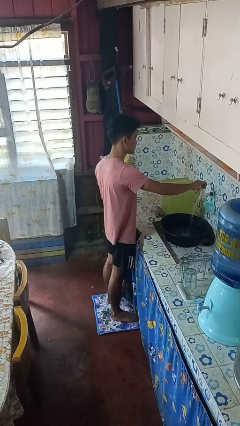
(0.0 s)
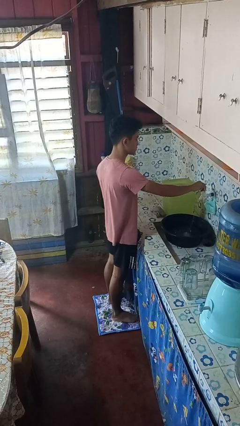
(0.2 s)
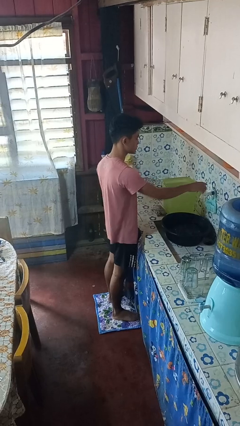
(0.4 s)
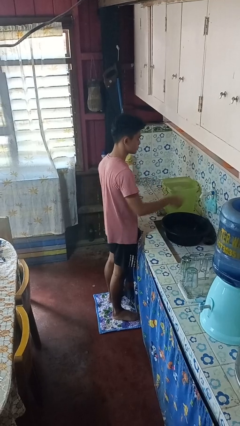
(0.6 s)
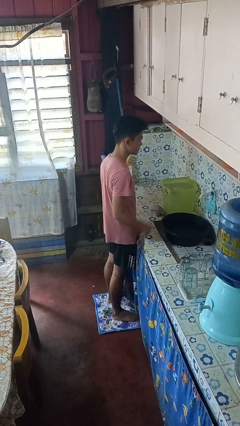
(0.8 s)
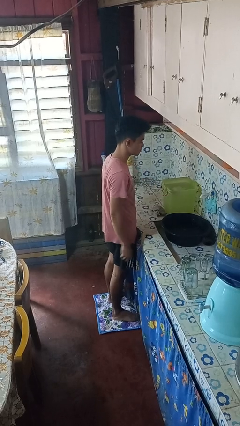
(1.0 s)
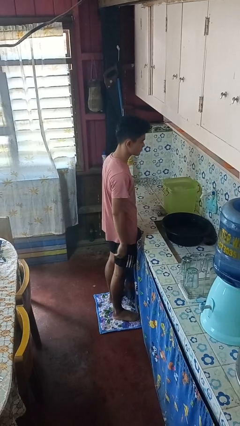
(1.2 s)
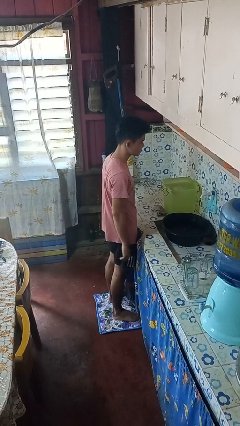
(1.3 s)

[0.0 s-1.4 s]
person turns off faucet

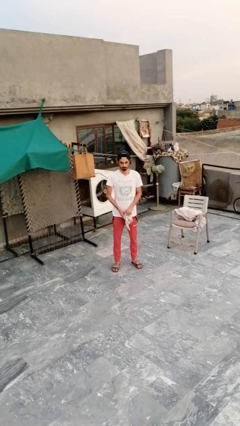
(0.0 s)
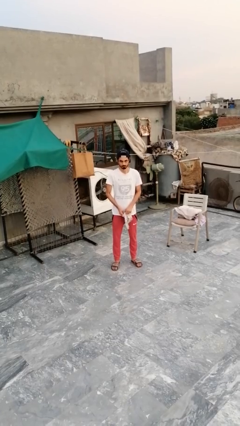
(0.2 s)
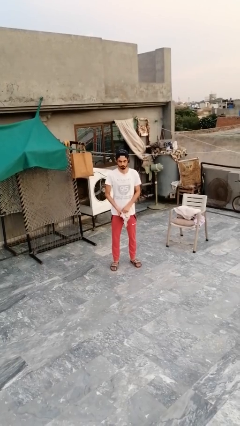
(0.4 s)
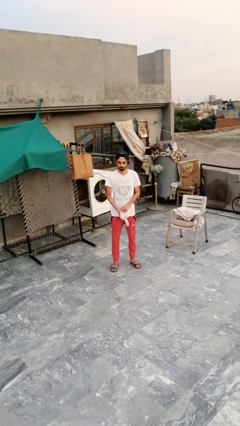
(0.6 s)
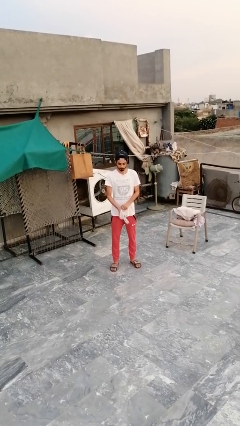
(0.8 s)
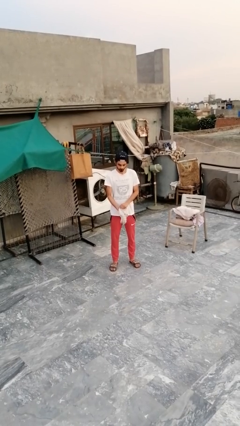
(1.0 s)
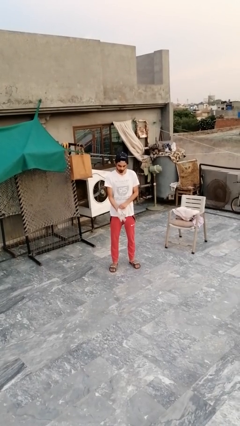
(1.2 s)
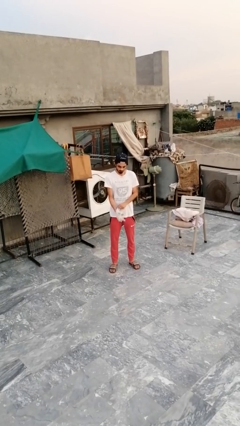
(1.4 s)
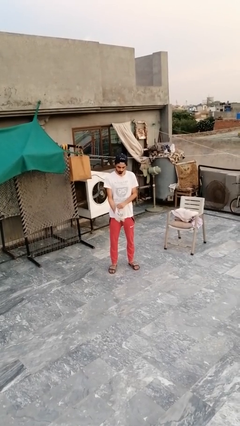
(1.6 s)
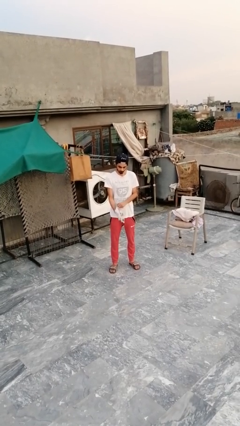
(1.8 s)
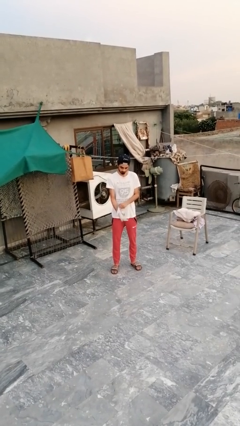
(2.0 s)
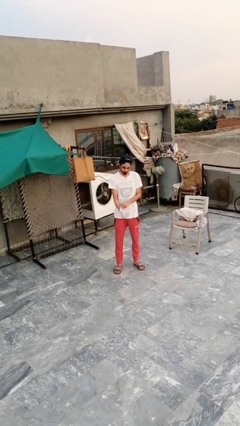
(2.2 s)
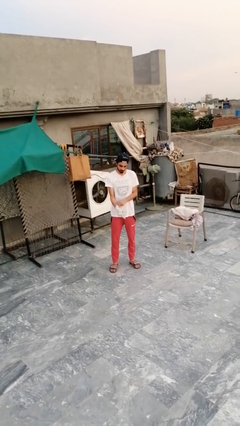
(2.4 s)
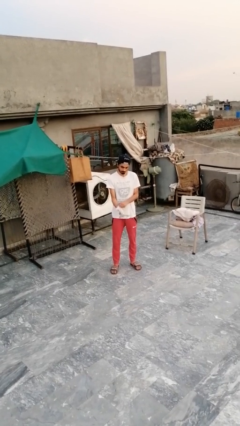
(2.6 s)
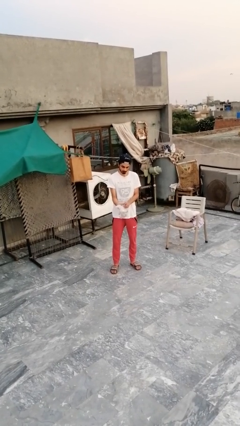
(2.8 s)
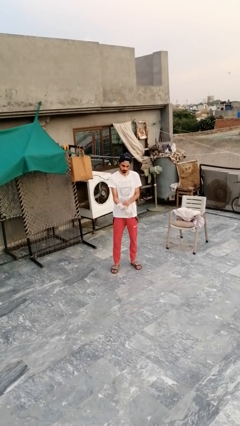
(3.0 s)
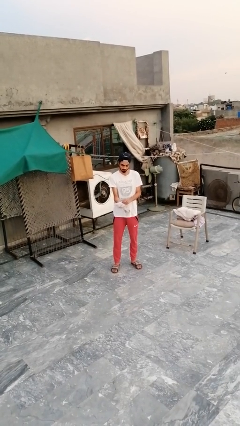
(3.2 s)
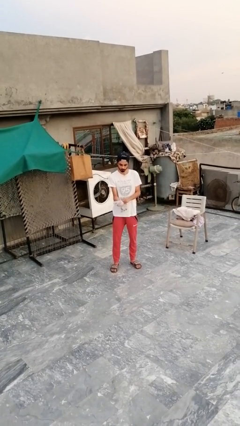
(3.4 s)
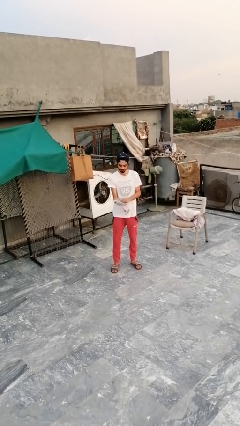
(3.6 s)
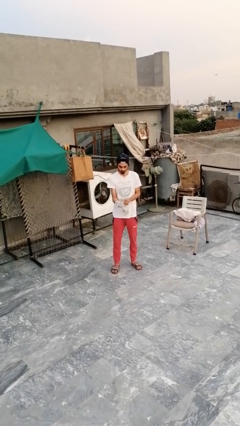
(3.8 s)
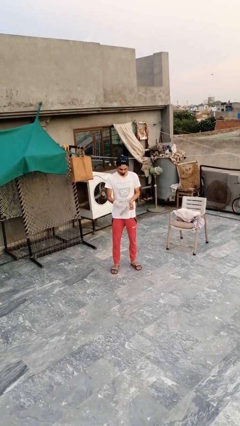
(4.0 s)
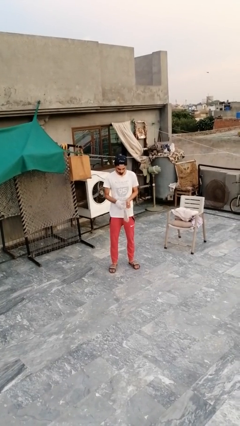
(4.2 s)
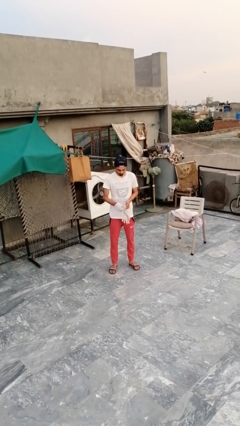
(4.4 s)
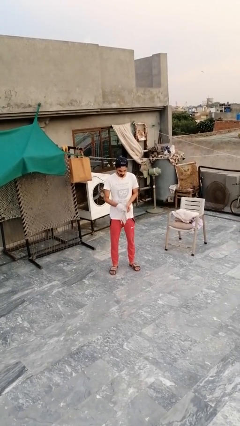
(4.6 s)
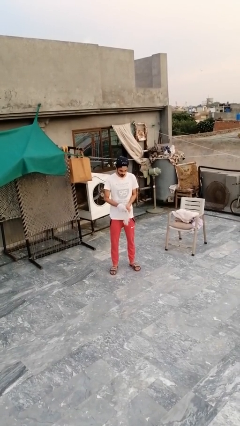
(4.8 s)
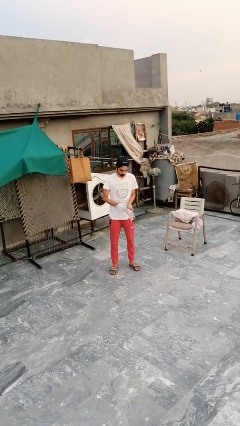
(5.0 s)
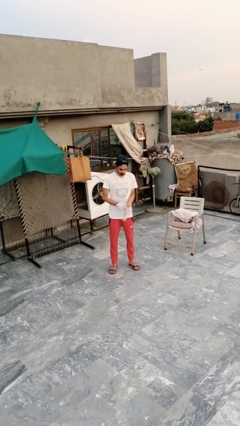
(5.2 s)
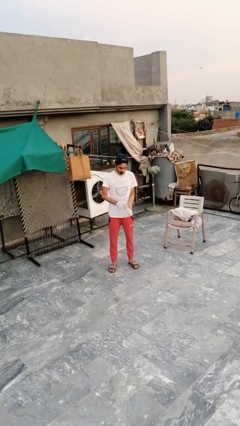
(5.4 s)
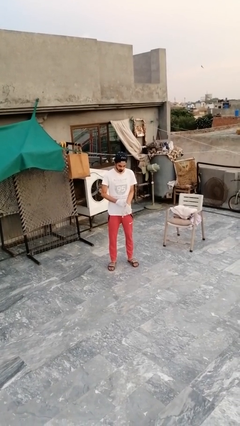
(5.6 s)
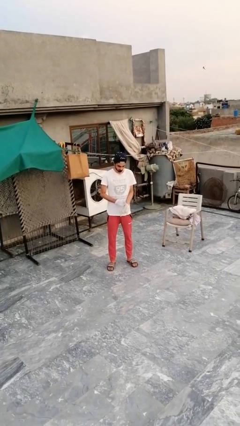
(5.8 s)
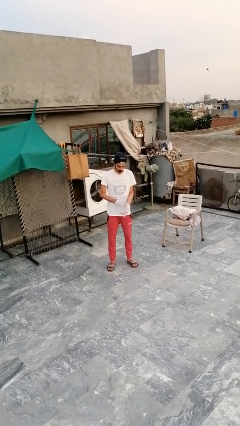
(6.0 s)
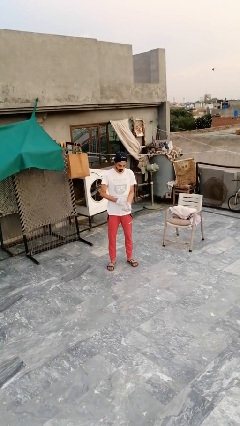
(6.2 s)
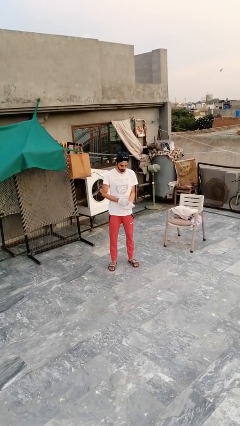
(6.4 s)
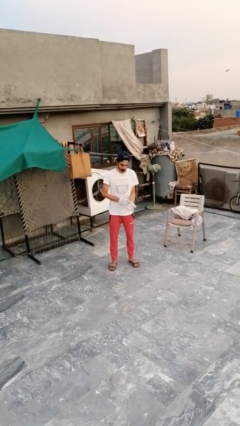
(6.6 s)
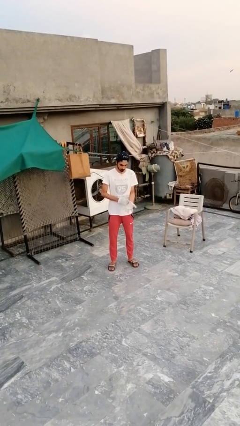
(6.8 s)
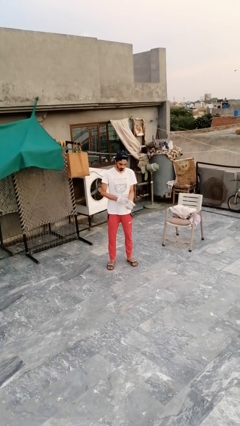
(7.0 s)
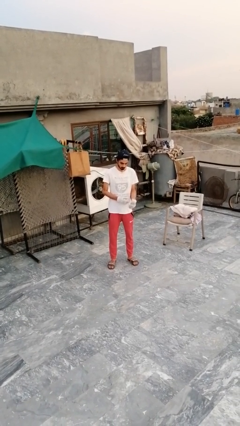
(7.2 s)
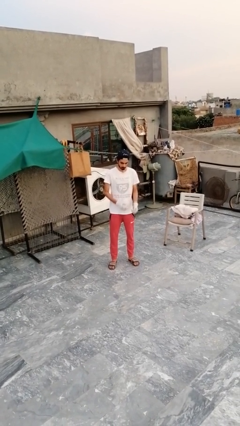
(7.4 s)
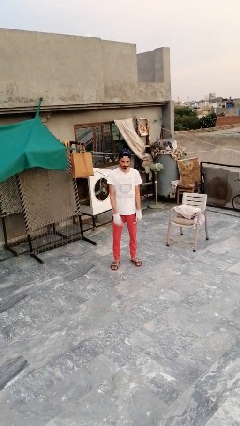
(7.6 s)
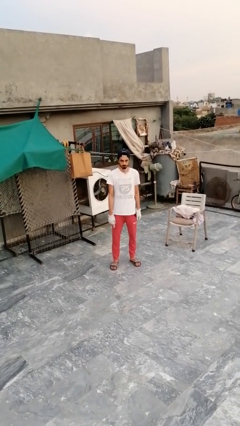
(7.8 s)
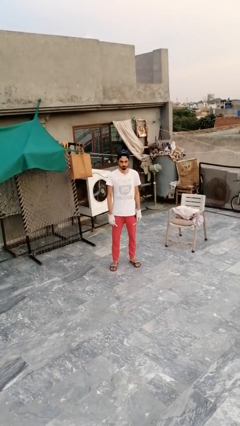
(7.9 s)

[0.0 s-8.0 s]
person puts on gloves

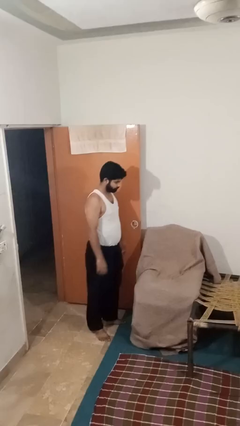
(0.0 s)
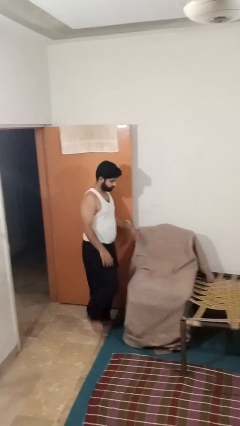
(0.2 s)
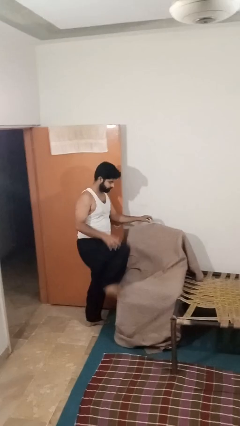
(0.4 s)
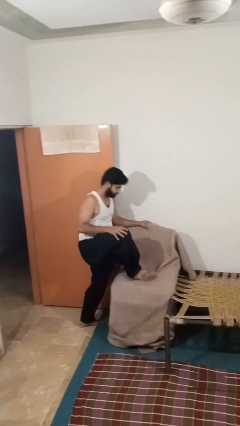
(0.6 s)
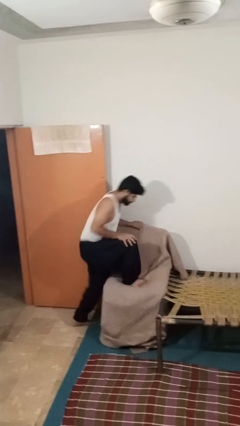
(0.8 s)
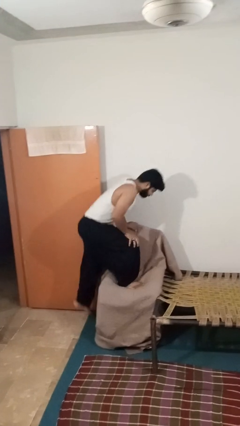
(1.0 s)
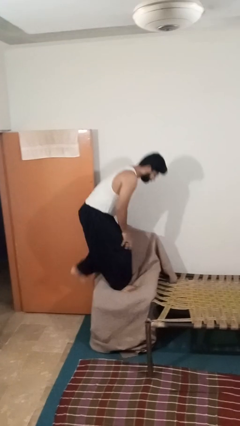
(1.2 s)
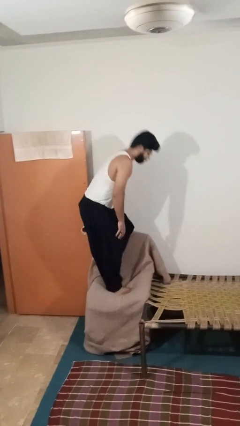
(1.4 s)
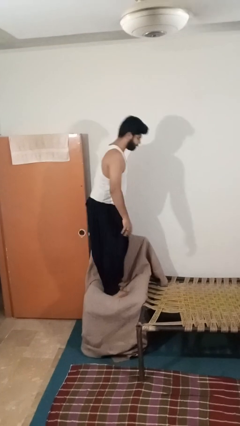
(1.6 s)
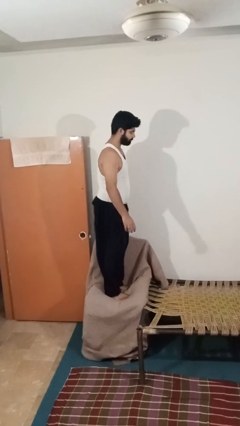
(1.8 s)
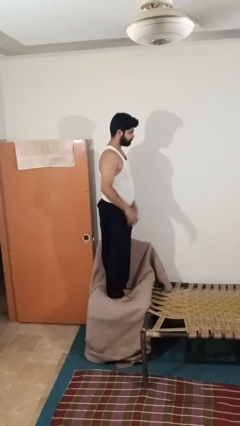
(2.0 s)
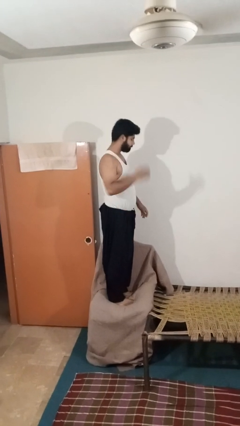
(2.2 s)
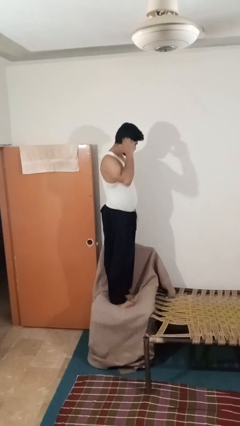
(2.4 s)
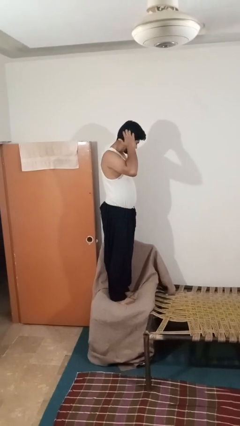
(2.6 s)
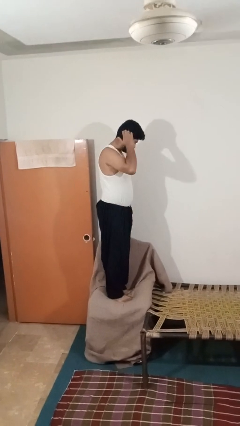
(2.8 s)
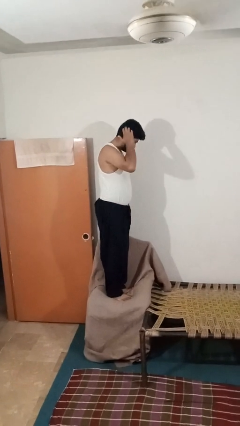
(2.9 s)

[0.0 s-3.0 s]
person climbs on couch

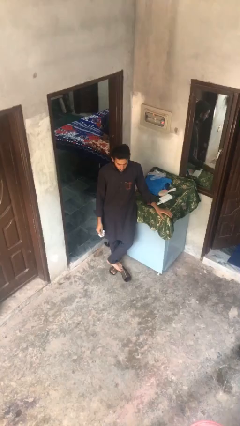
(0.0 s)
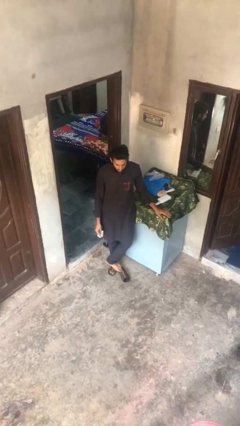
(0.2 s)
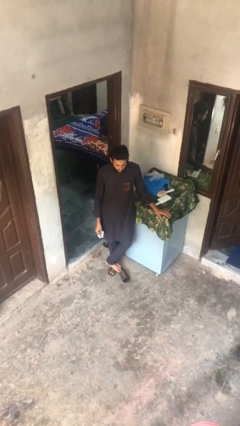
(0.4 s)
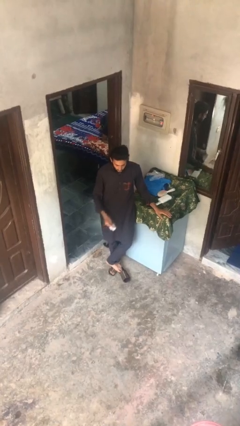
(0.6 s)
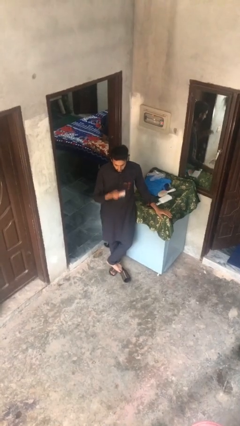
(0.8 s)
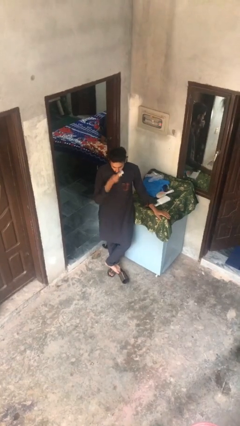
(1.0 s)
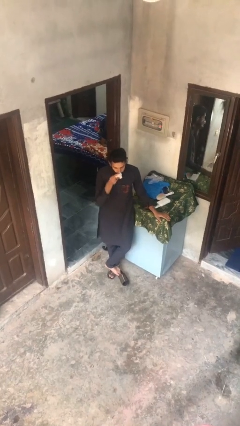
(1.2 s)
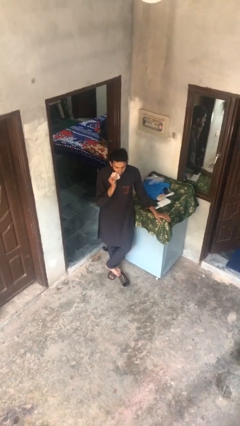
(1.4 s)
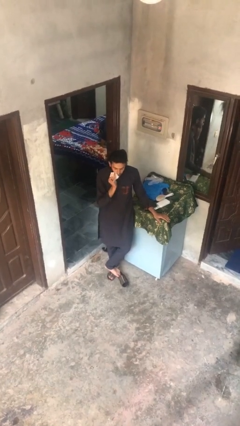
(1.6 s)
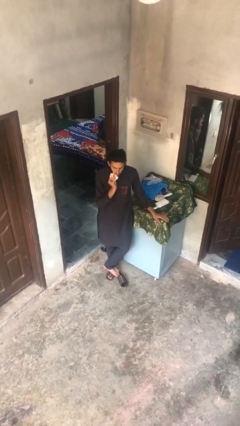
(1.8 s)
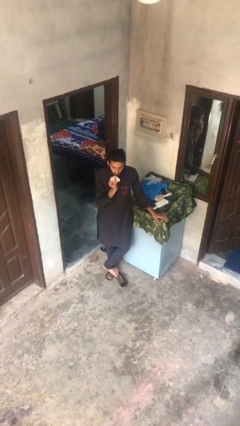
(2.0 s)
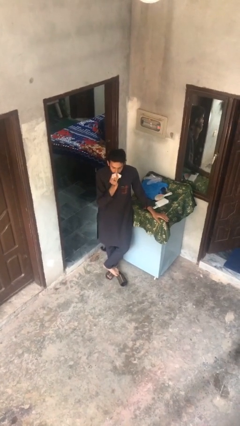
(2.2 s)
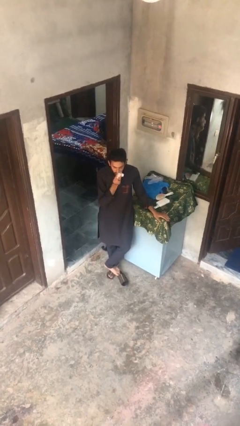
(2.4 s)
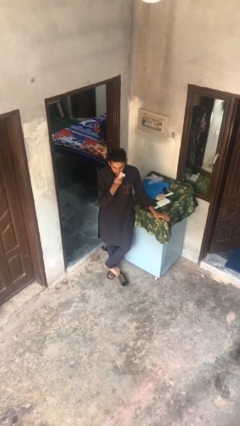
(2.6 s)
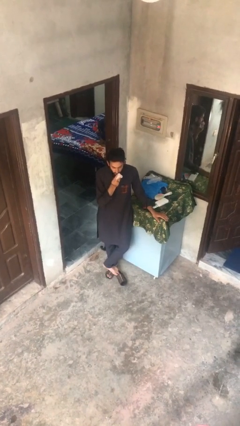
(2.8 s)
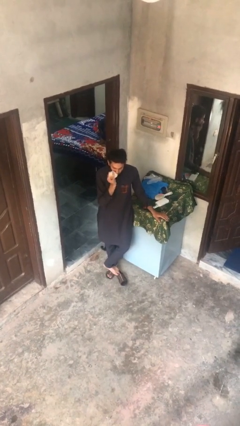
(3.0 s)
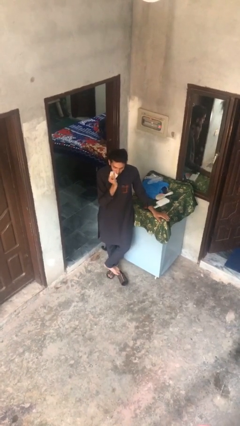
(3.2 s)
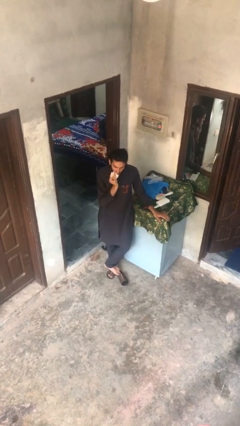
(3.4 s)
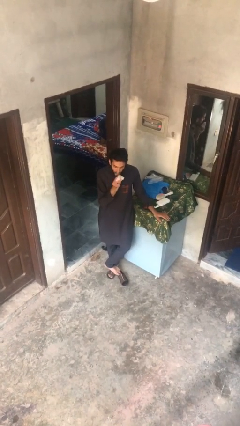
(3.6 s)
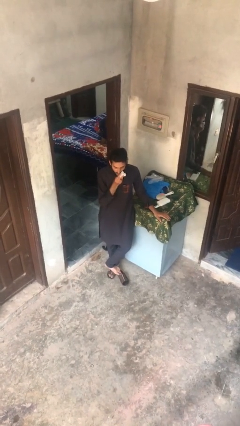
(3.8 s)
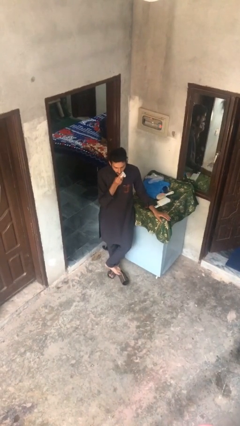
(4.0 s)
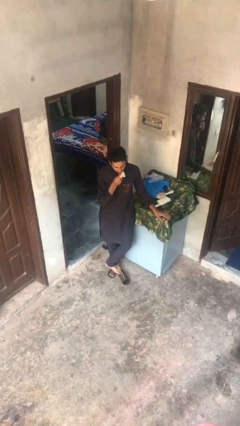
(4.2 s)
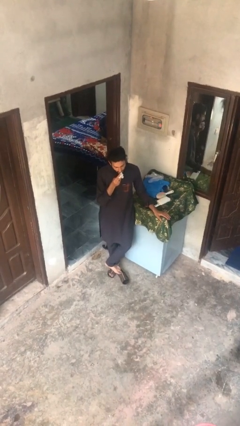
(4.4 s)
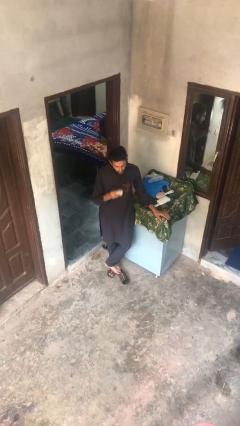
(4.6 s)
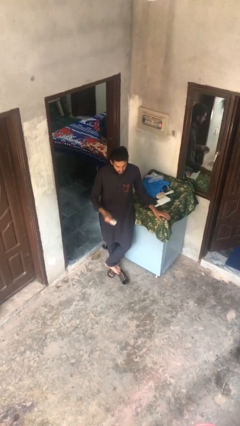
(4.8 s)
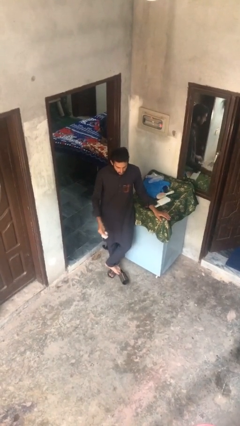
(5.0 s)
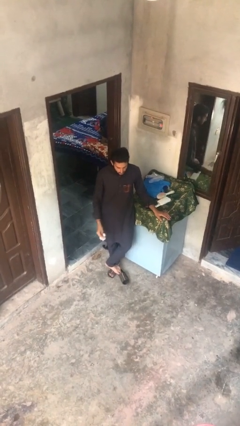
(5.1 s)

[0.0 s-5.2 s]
person wipes mouth with napkin

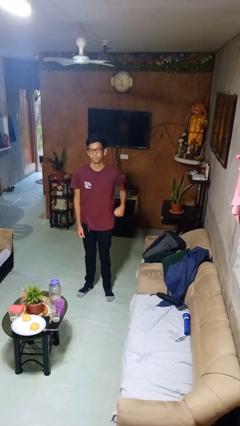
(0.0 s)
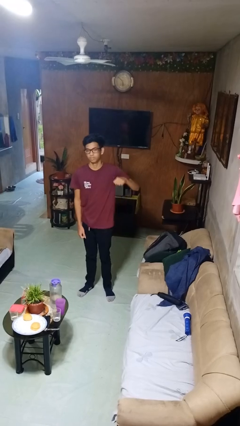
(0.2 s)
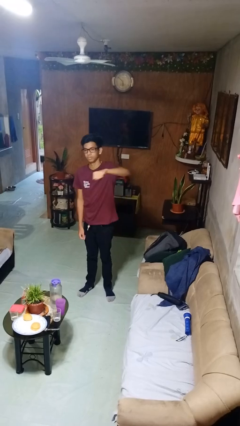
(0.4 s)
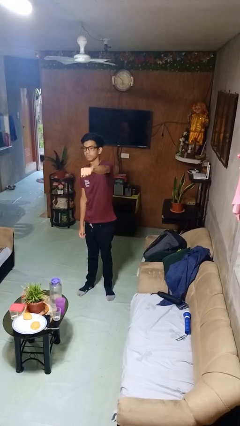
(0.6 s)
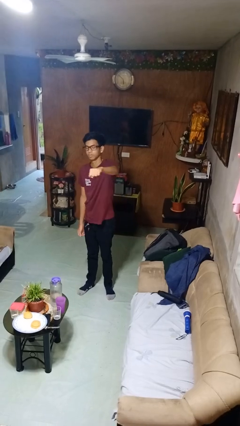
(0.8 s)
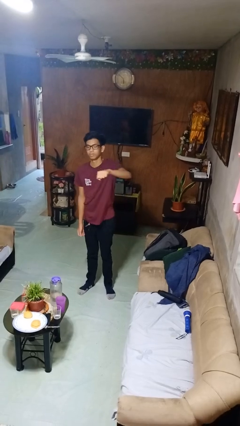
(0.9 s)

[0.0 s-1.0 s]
person punches
